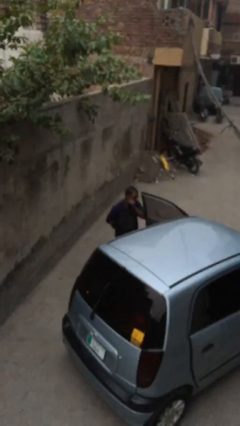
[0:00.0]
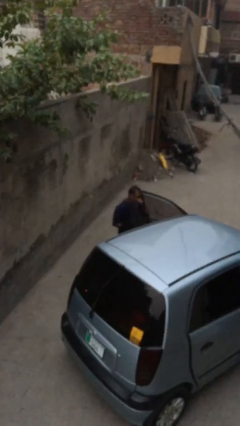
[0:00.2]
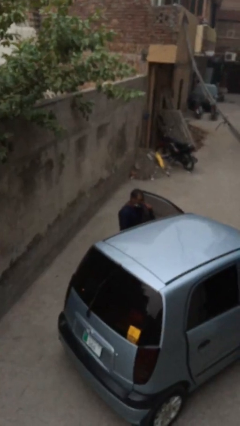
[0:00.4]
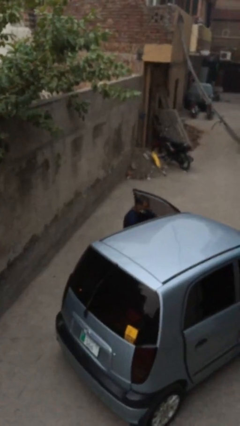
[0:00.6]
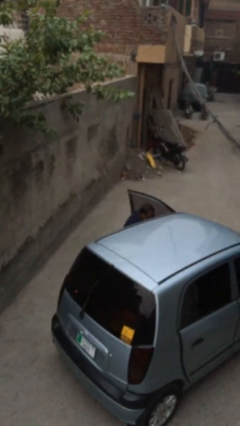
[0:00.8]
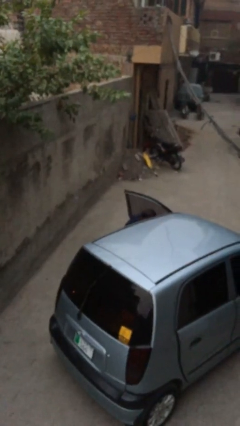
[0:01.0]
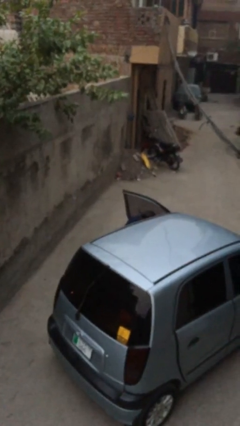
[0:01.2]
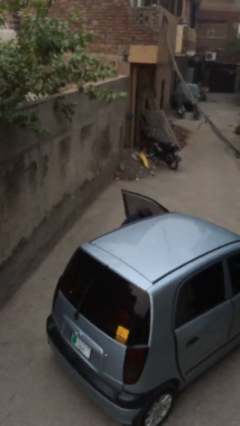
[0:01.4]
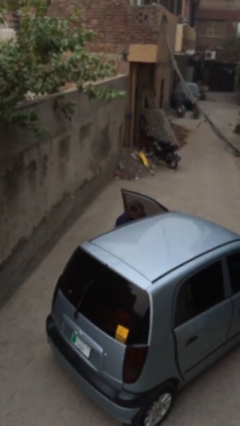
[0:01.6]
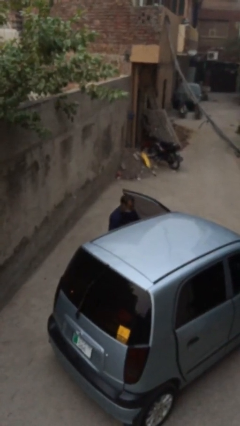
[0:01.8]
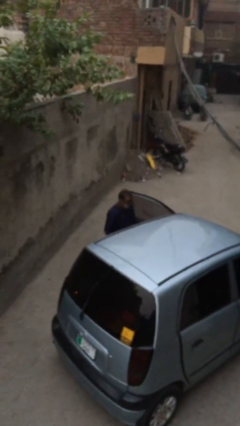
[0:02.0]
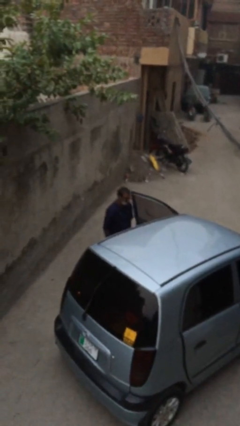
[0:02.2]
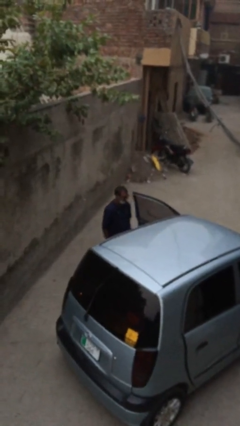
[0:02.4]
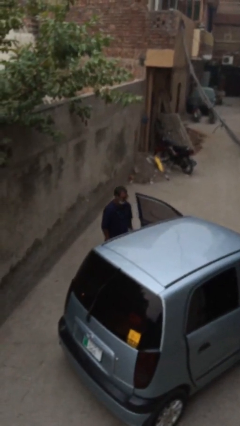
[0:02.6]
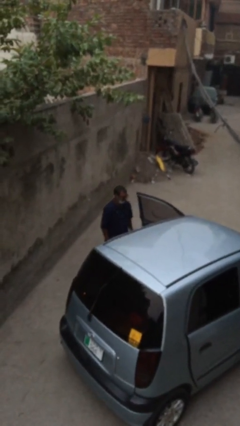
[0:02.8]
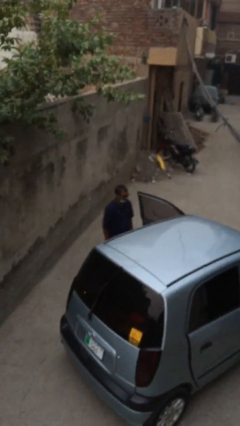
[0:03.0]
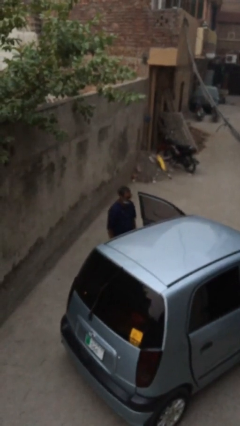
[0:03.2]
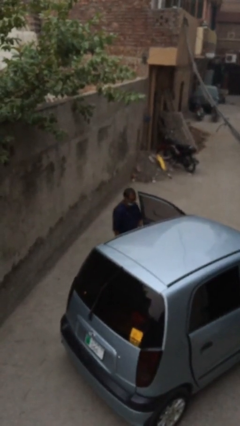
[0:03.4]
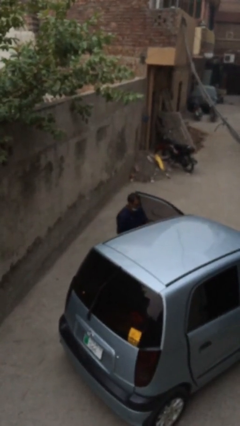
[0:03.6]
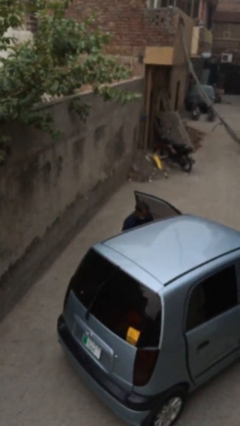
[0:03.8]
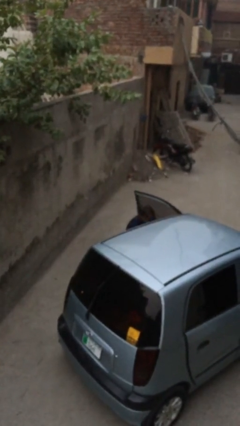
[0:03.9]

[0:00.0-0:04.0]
person loads car

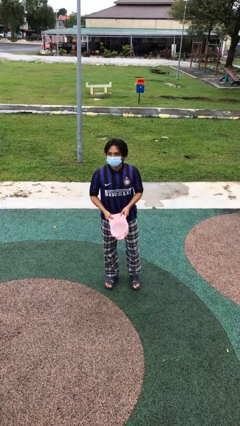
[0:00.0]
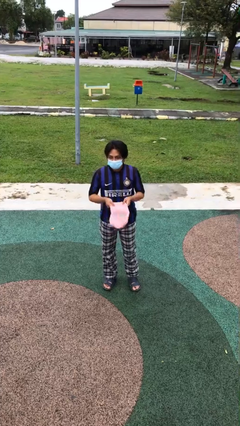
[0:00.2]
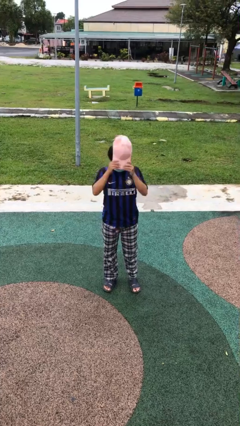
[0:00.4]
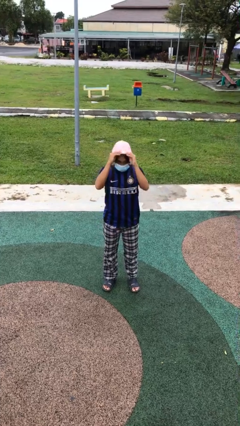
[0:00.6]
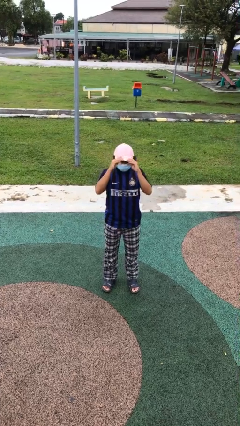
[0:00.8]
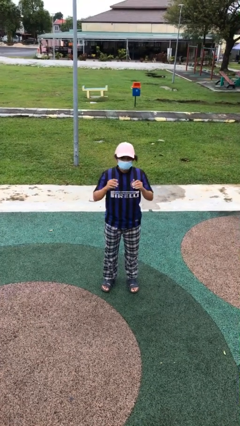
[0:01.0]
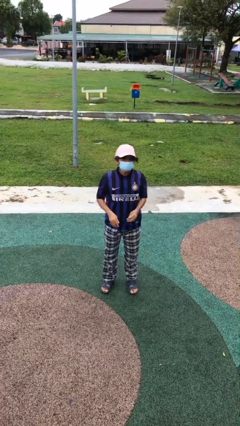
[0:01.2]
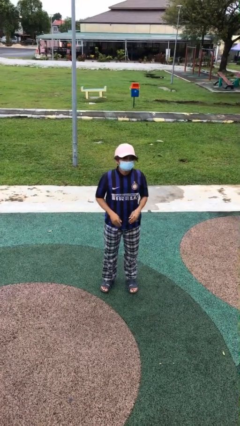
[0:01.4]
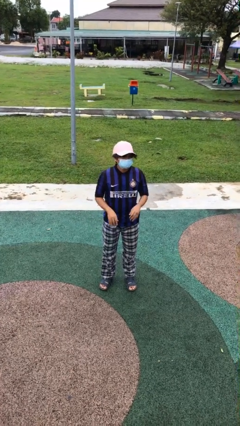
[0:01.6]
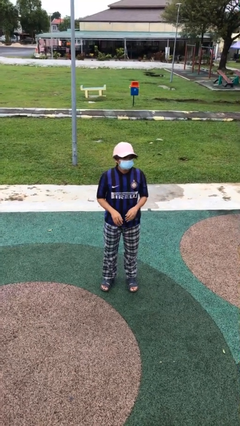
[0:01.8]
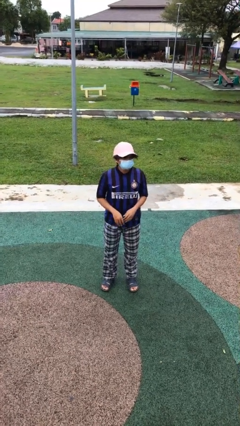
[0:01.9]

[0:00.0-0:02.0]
person puts on hat

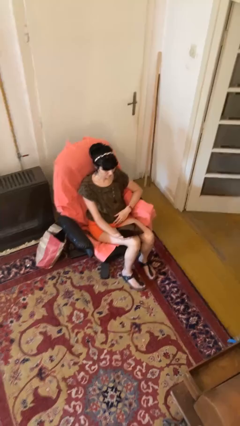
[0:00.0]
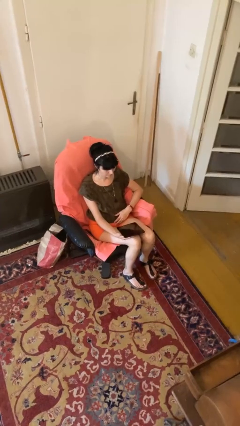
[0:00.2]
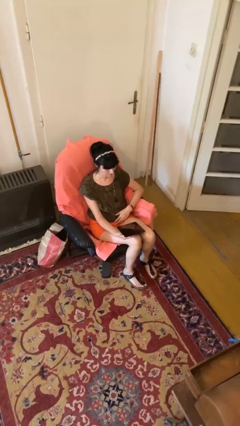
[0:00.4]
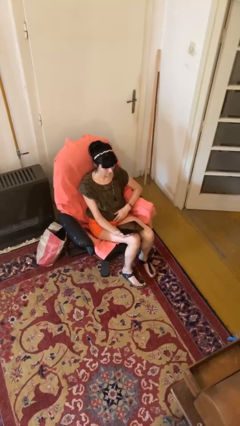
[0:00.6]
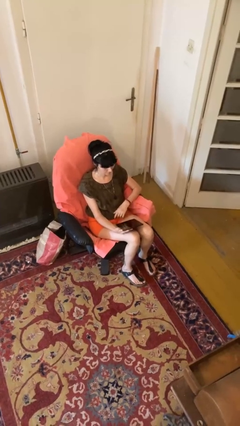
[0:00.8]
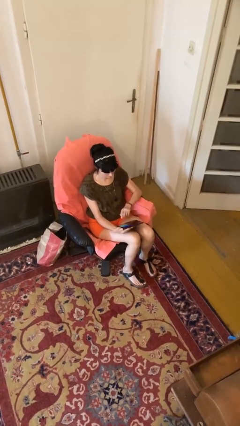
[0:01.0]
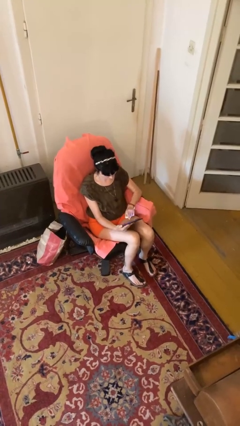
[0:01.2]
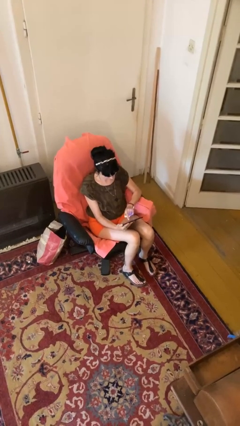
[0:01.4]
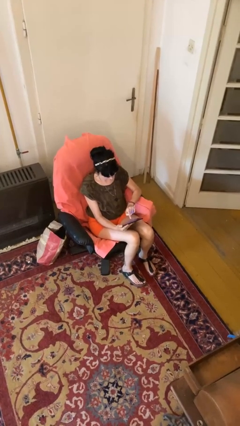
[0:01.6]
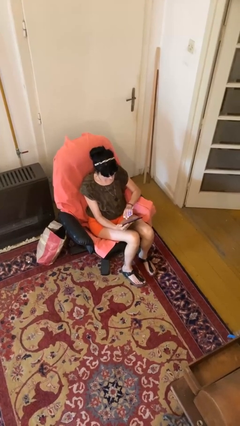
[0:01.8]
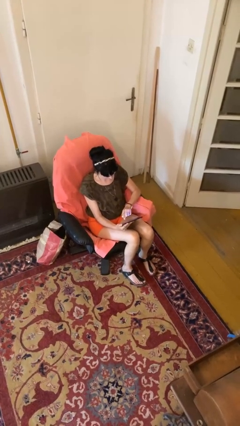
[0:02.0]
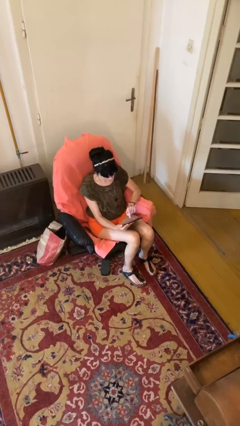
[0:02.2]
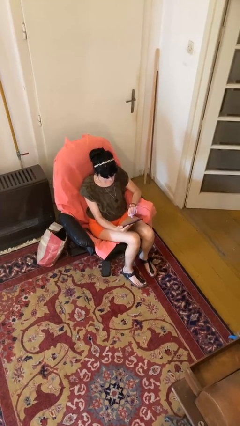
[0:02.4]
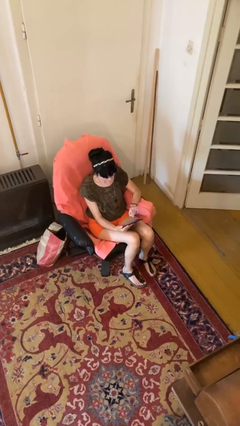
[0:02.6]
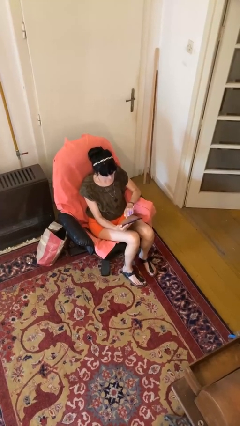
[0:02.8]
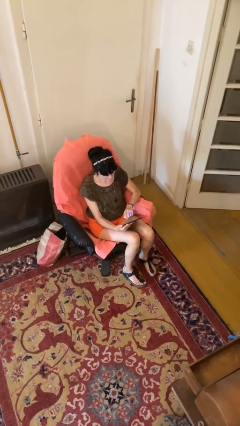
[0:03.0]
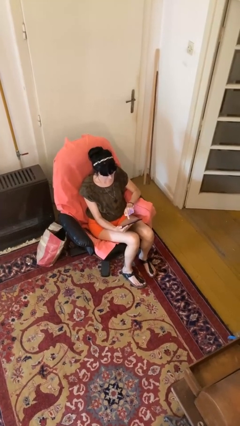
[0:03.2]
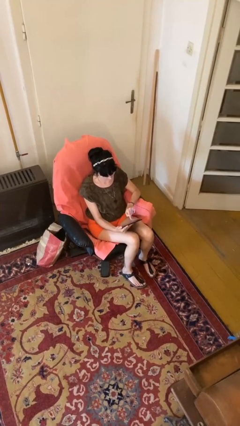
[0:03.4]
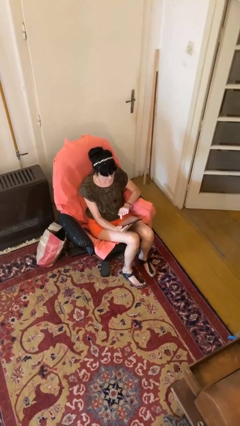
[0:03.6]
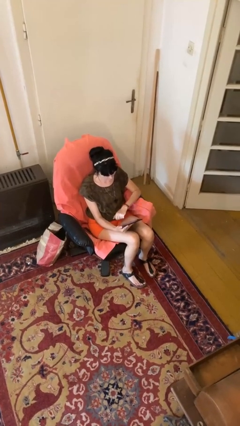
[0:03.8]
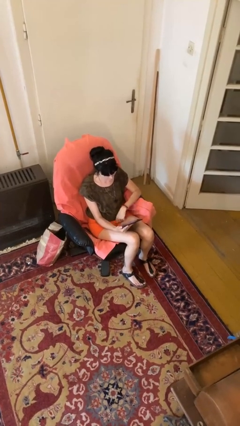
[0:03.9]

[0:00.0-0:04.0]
person interacts with tablet

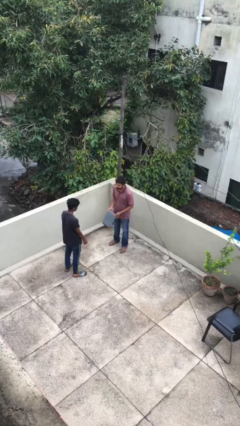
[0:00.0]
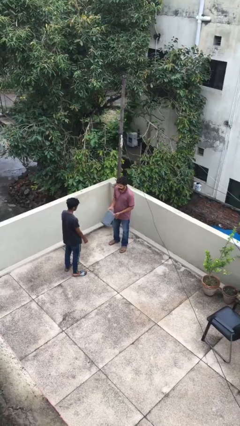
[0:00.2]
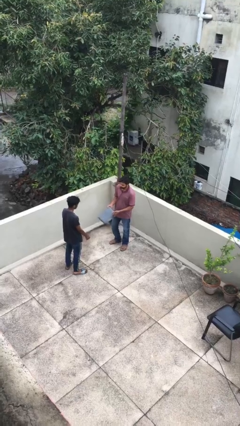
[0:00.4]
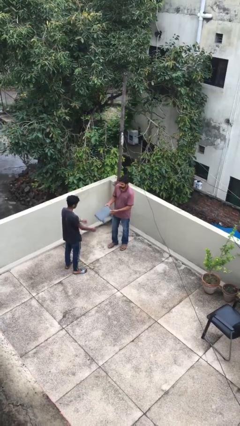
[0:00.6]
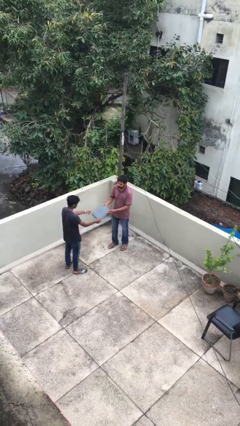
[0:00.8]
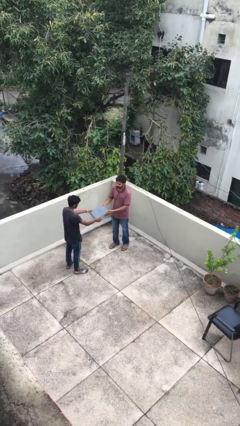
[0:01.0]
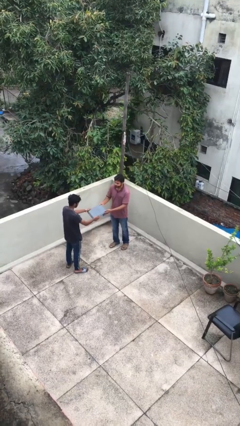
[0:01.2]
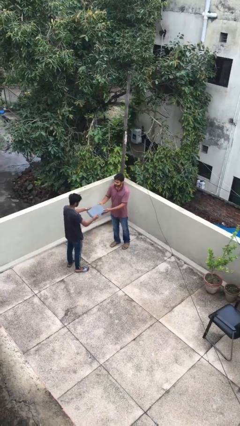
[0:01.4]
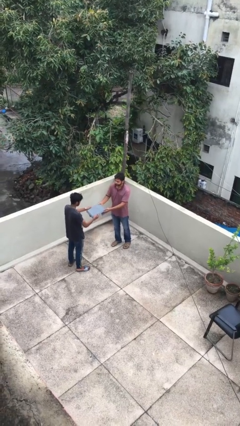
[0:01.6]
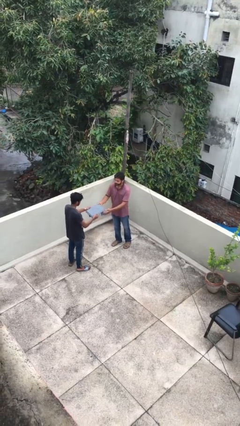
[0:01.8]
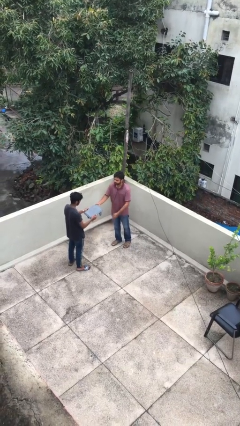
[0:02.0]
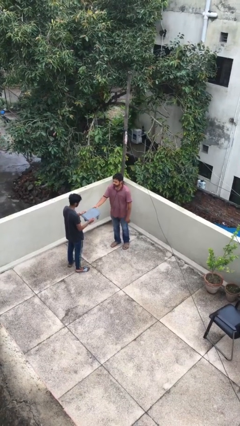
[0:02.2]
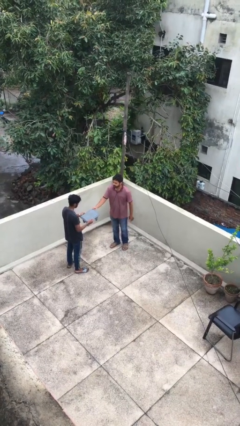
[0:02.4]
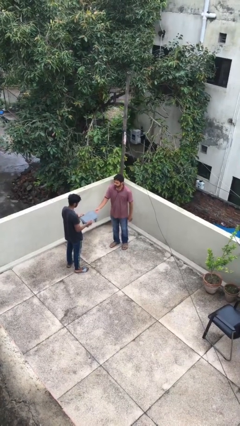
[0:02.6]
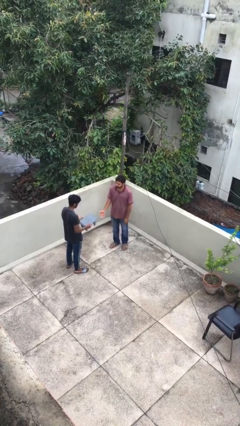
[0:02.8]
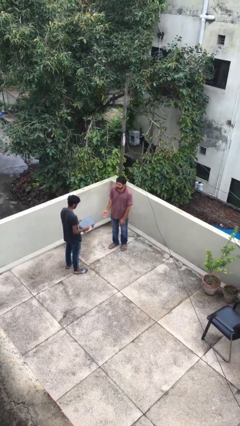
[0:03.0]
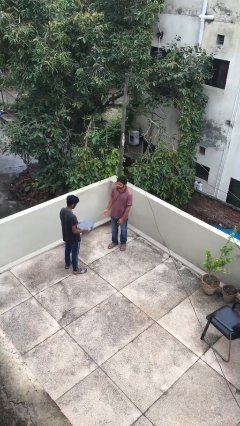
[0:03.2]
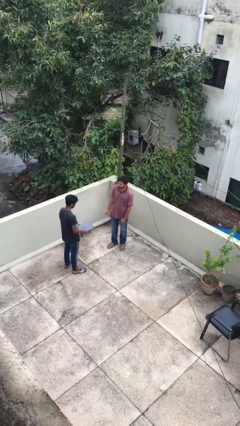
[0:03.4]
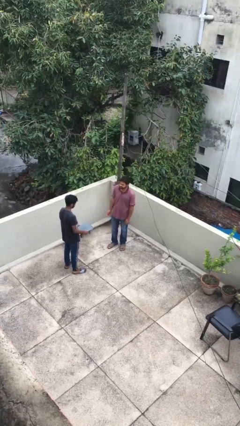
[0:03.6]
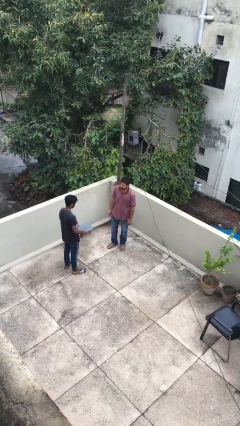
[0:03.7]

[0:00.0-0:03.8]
person transfers object to person

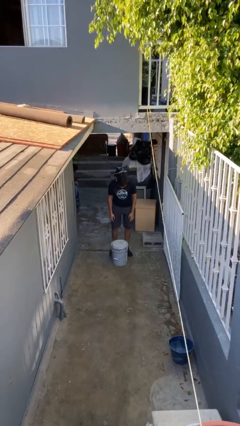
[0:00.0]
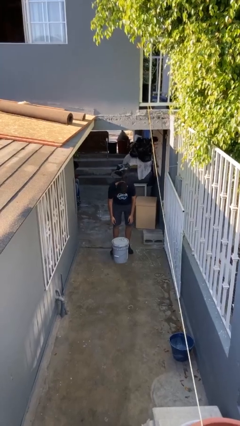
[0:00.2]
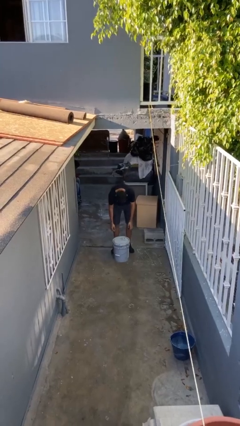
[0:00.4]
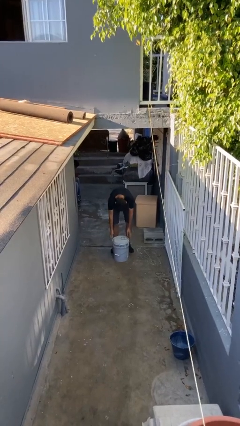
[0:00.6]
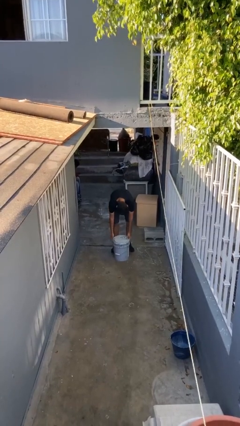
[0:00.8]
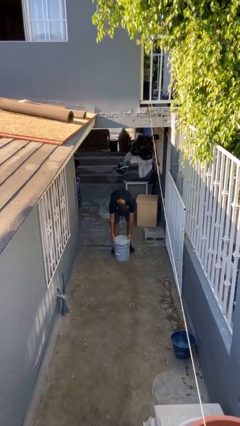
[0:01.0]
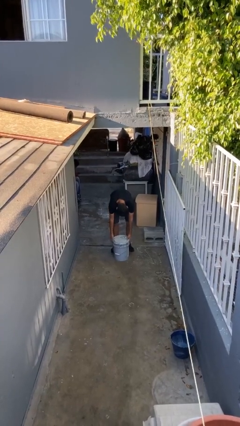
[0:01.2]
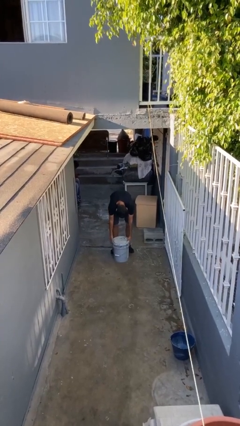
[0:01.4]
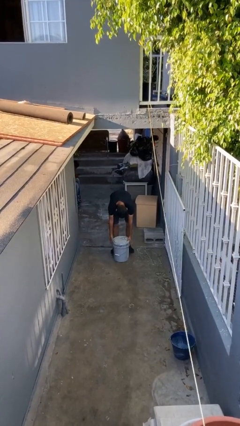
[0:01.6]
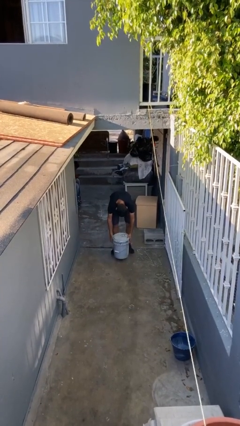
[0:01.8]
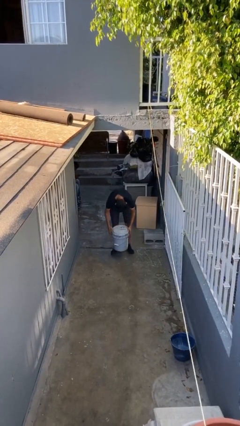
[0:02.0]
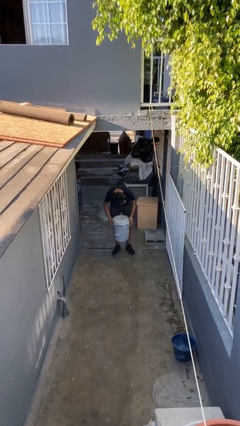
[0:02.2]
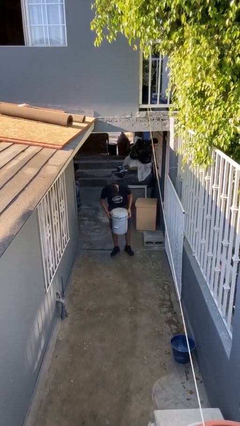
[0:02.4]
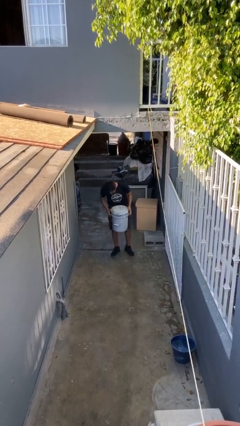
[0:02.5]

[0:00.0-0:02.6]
person picks up object from floor

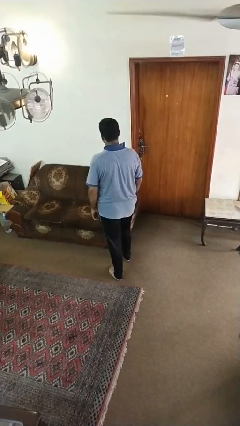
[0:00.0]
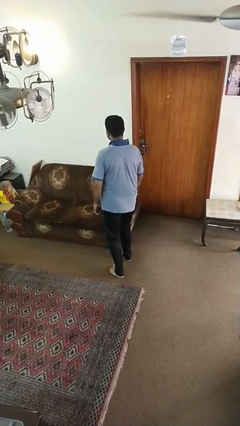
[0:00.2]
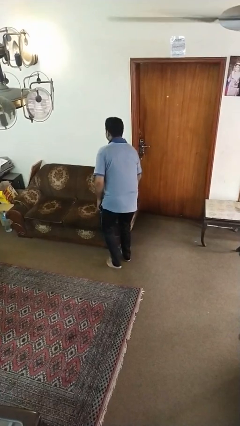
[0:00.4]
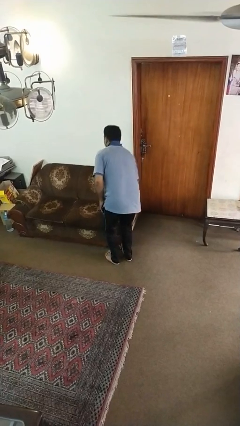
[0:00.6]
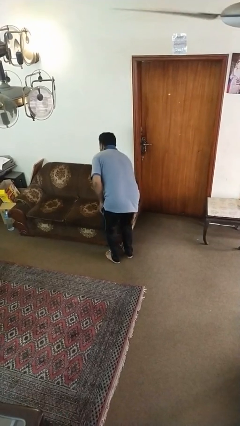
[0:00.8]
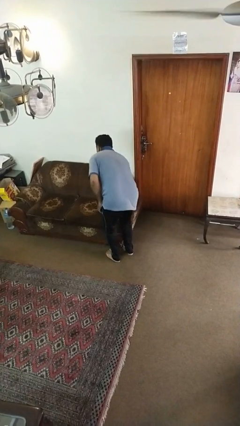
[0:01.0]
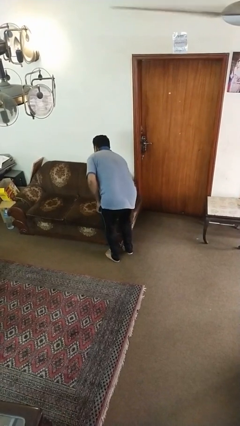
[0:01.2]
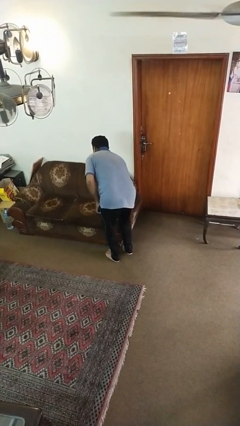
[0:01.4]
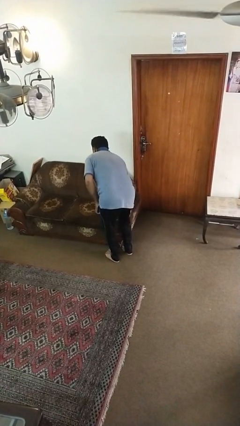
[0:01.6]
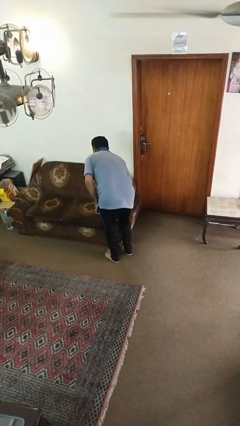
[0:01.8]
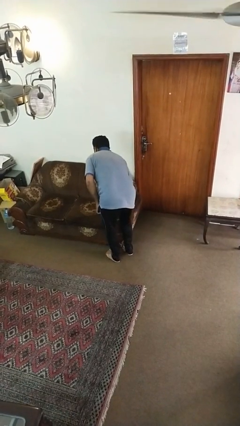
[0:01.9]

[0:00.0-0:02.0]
person stubs toe
